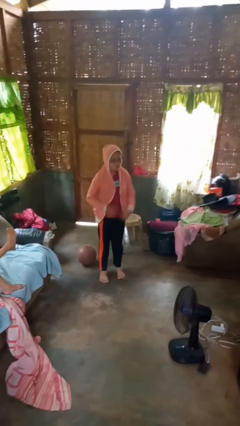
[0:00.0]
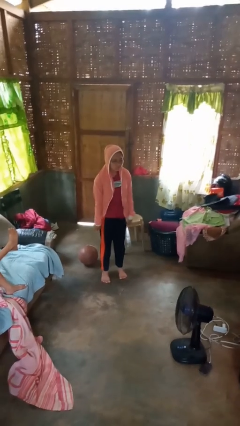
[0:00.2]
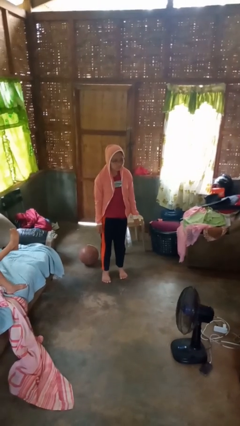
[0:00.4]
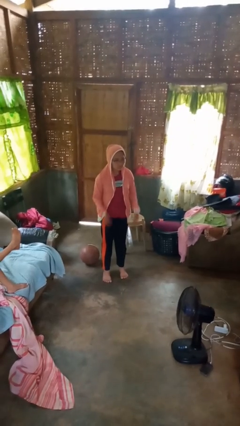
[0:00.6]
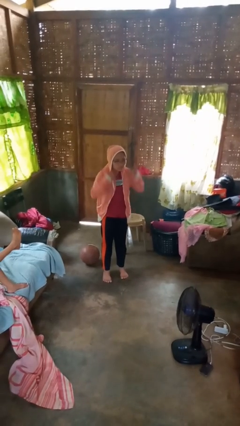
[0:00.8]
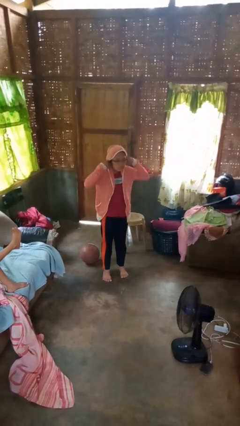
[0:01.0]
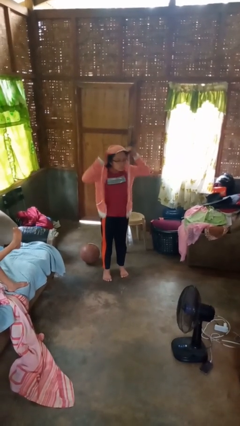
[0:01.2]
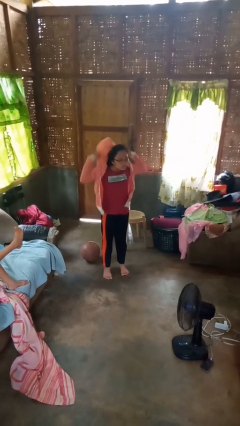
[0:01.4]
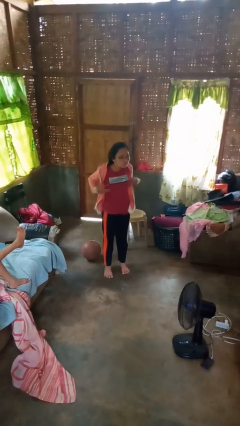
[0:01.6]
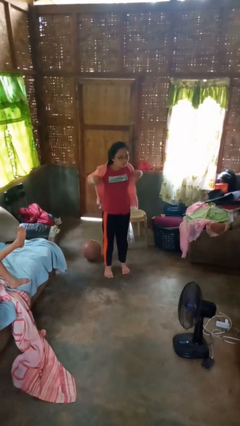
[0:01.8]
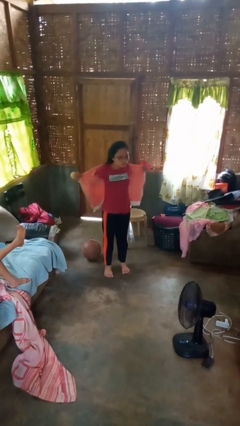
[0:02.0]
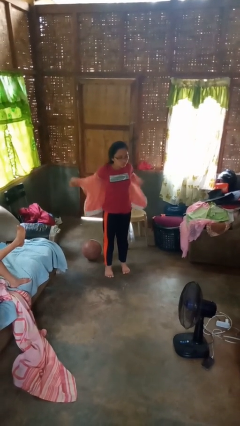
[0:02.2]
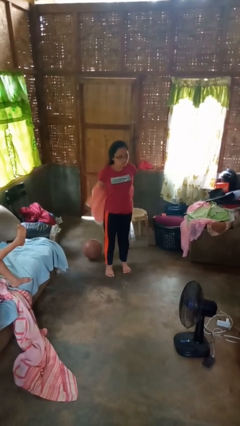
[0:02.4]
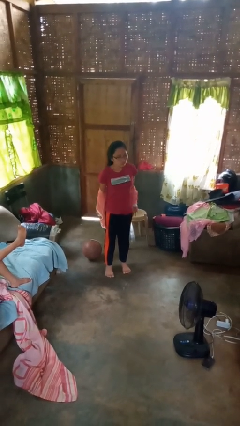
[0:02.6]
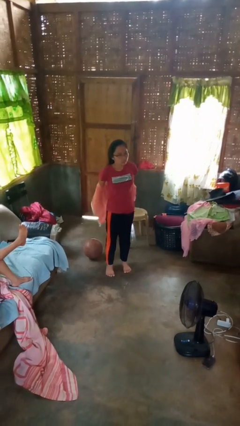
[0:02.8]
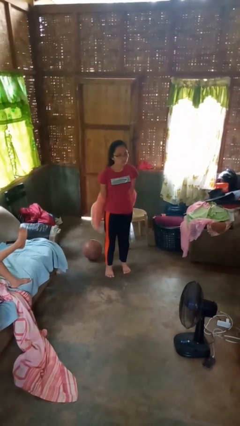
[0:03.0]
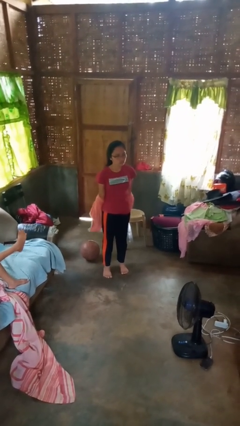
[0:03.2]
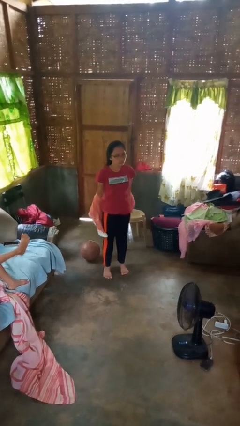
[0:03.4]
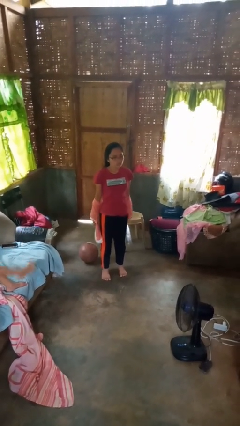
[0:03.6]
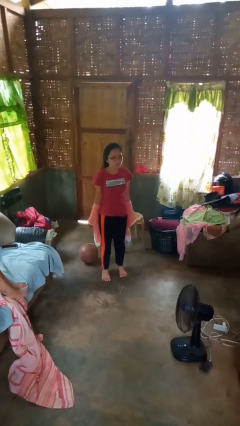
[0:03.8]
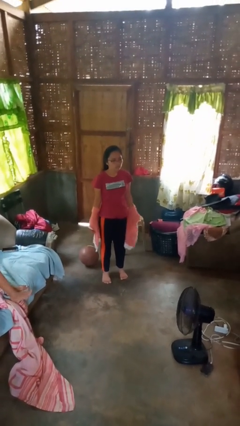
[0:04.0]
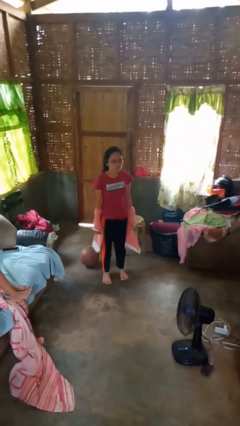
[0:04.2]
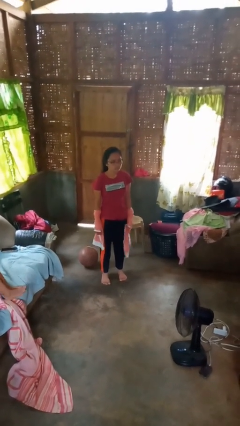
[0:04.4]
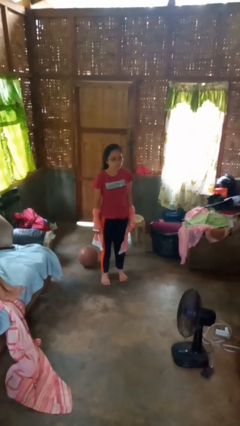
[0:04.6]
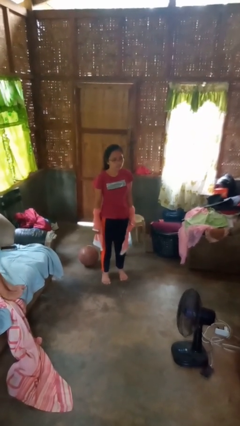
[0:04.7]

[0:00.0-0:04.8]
person takes off hoodie

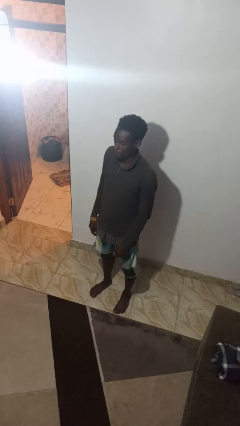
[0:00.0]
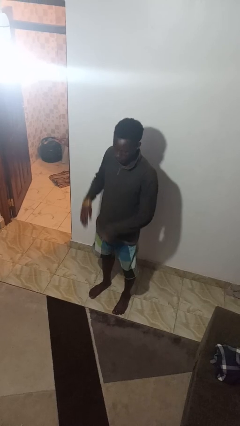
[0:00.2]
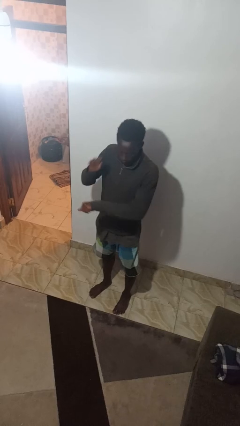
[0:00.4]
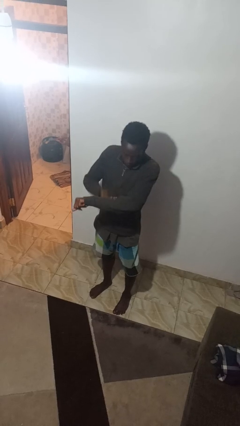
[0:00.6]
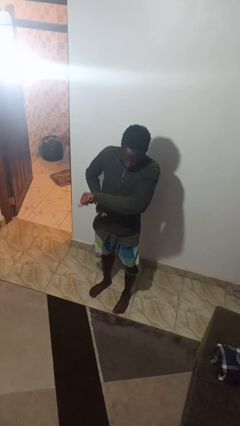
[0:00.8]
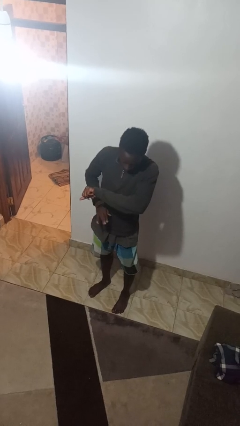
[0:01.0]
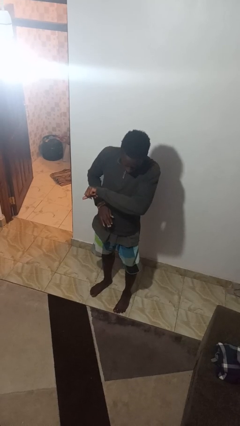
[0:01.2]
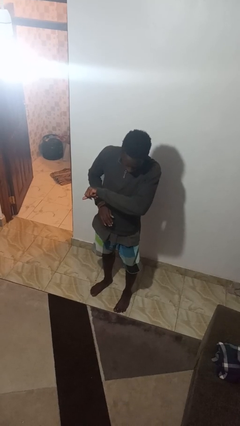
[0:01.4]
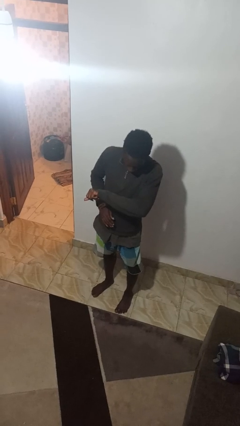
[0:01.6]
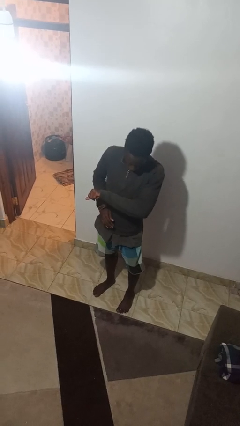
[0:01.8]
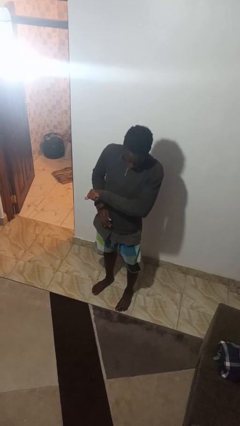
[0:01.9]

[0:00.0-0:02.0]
person swats bug

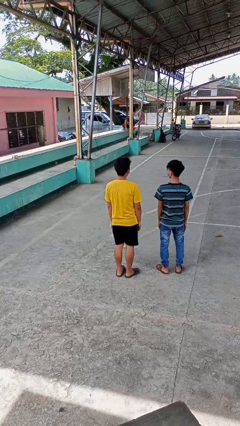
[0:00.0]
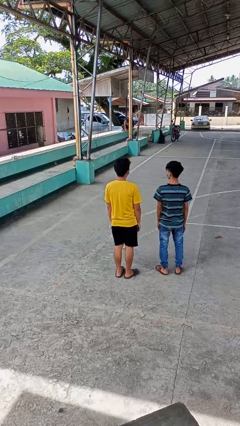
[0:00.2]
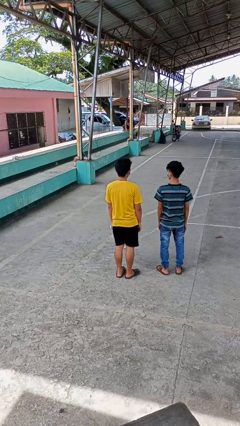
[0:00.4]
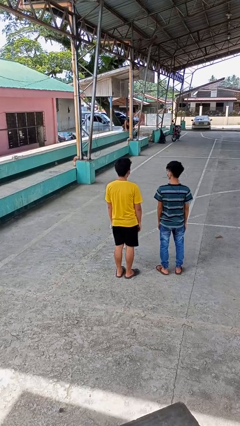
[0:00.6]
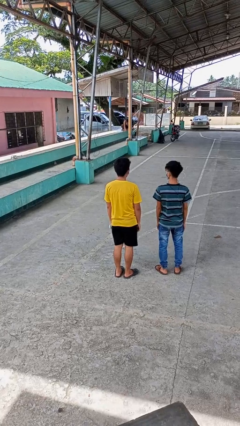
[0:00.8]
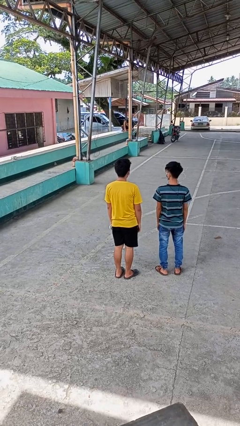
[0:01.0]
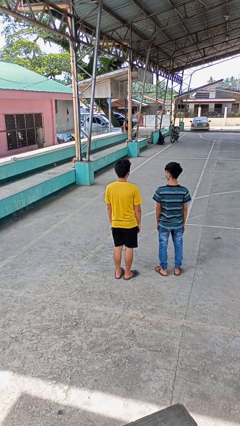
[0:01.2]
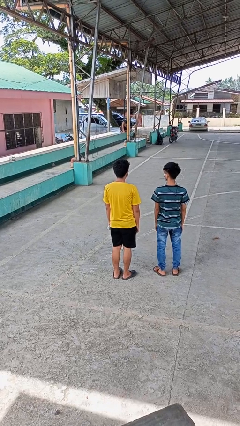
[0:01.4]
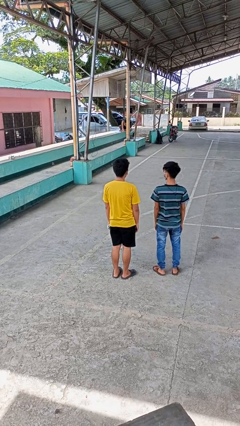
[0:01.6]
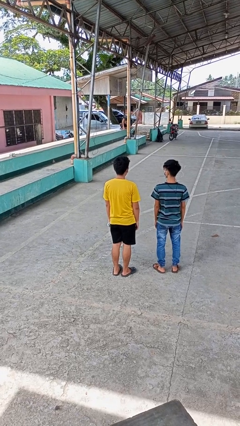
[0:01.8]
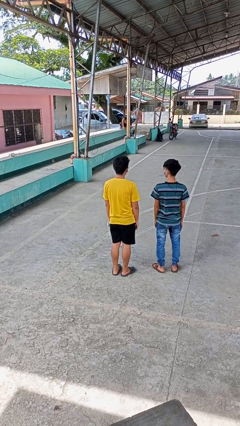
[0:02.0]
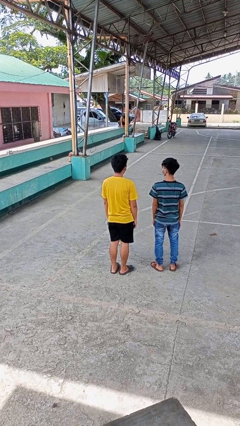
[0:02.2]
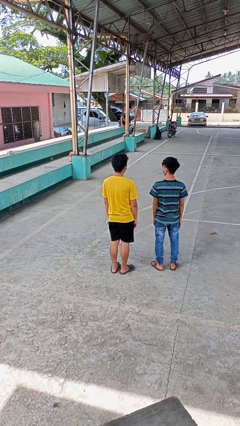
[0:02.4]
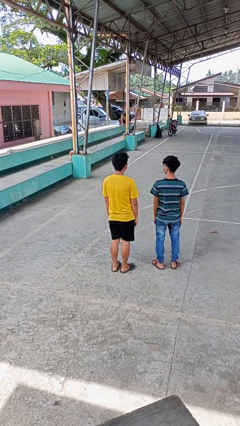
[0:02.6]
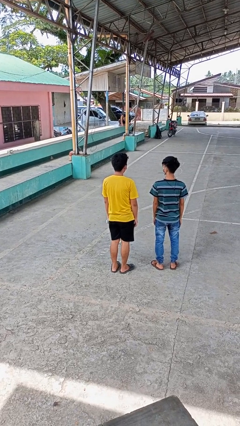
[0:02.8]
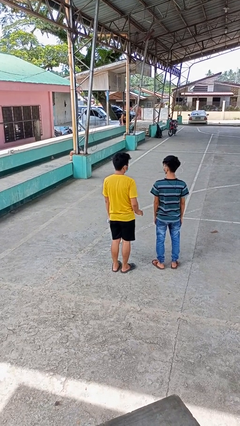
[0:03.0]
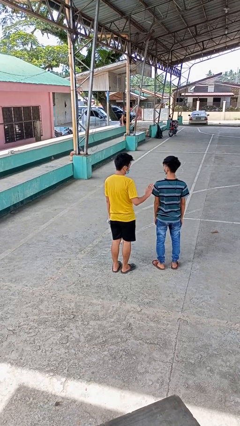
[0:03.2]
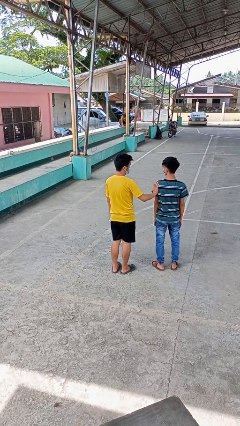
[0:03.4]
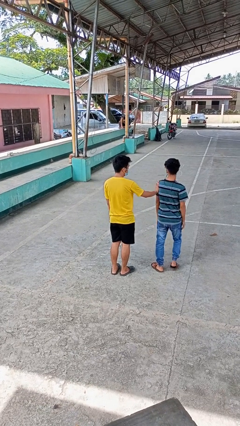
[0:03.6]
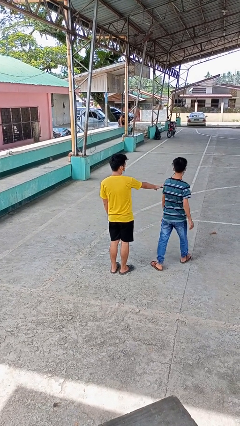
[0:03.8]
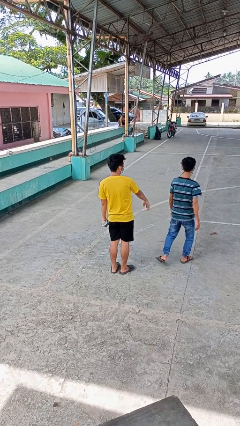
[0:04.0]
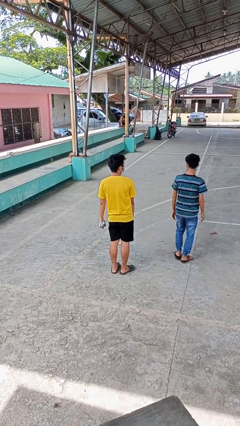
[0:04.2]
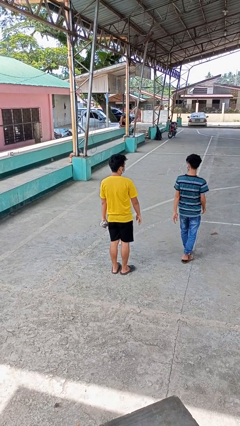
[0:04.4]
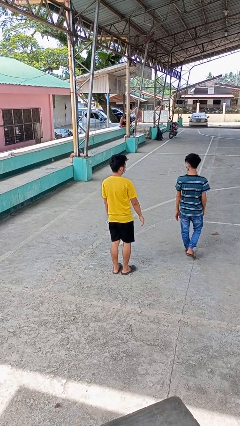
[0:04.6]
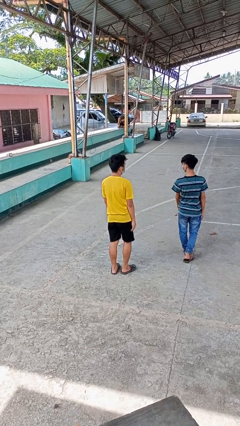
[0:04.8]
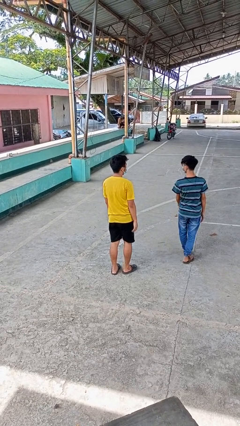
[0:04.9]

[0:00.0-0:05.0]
person shoves person

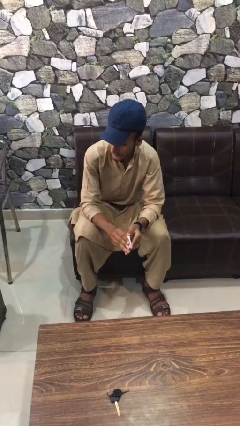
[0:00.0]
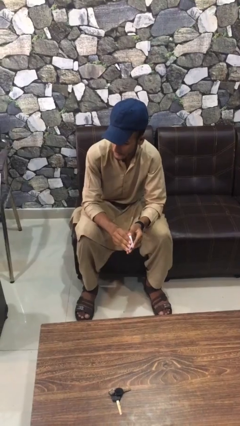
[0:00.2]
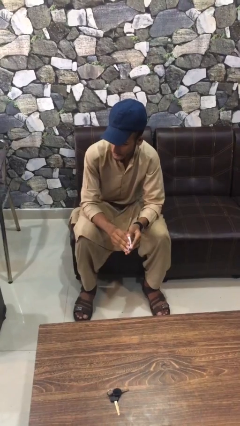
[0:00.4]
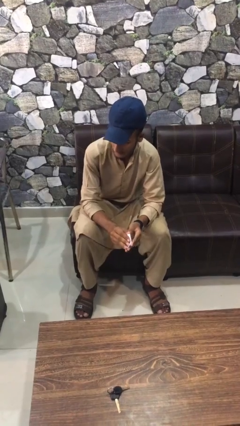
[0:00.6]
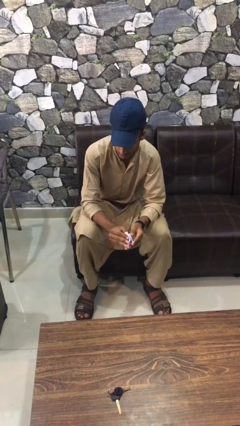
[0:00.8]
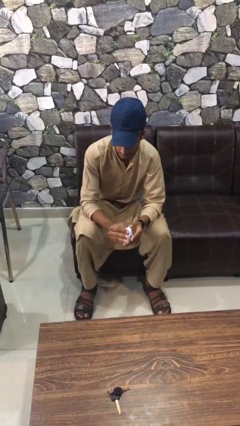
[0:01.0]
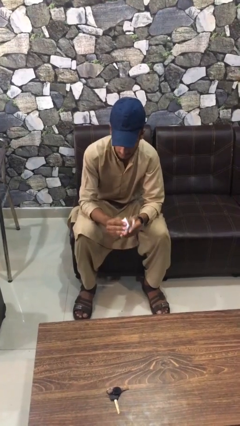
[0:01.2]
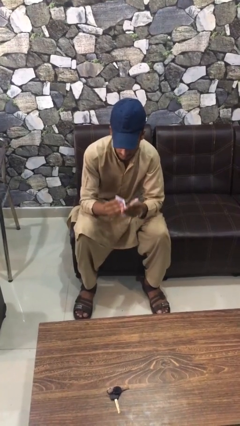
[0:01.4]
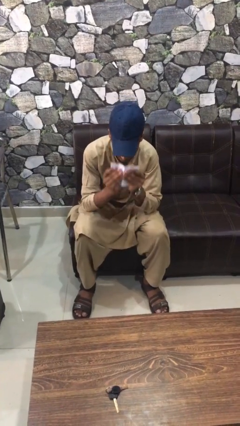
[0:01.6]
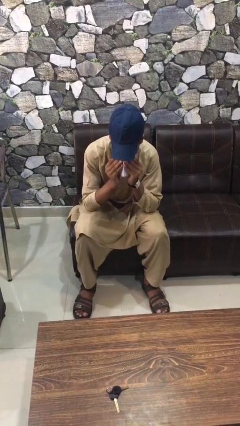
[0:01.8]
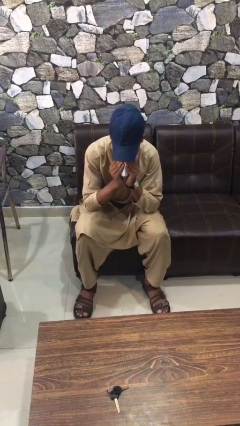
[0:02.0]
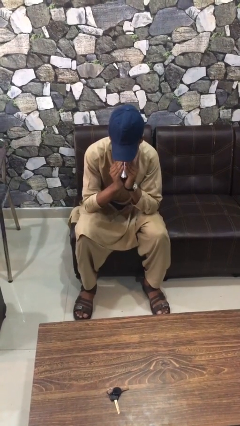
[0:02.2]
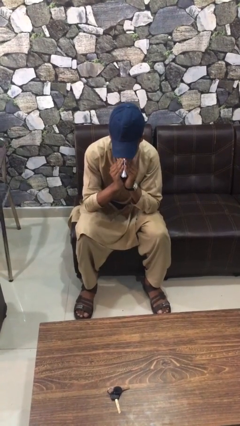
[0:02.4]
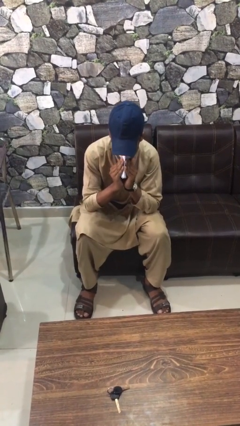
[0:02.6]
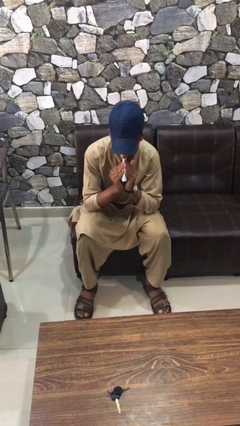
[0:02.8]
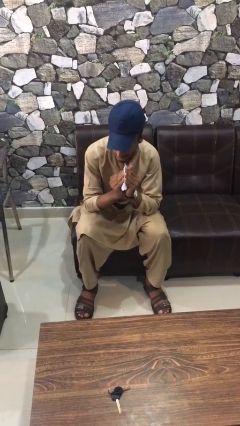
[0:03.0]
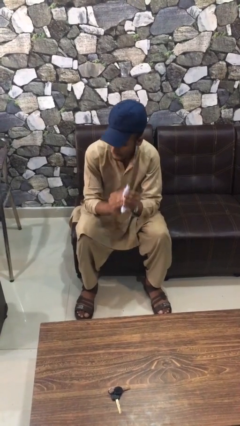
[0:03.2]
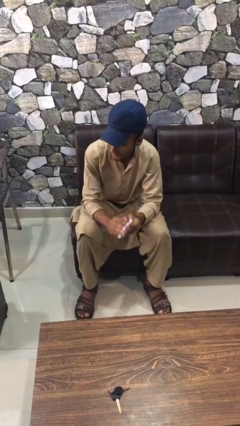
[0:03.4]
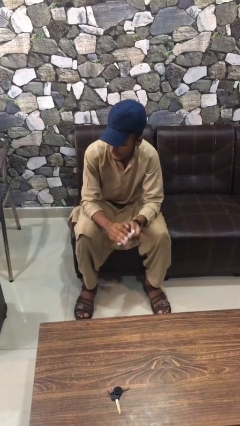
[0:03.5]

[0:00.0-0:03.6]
person blows nose

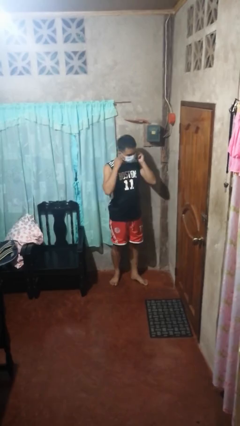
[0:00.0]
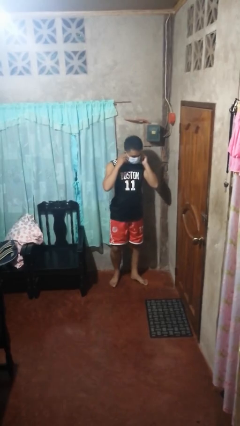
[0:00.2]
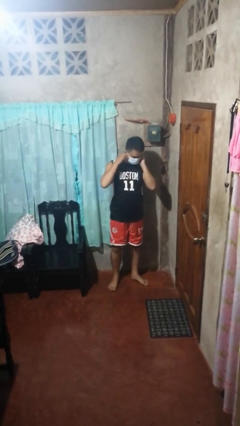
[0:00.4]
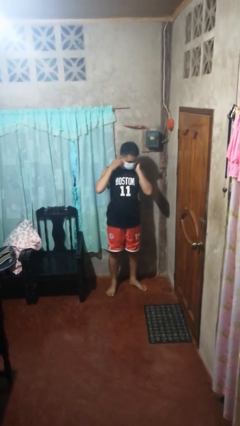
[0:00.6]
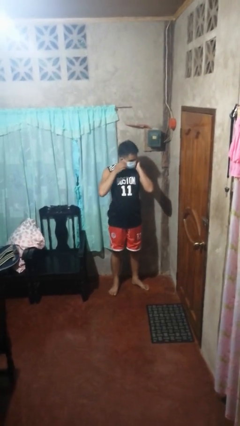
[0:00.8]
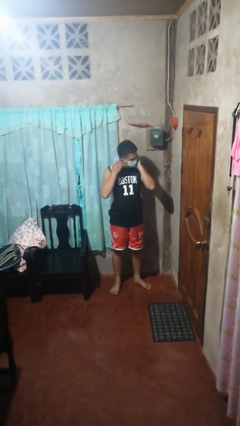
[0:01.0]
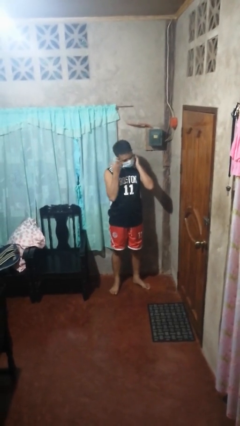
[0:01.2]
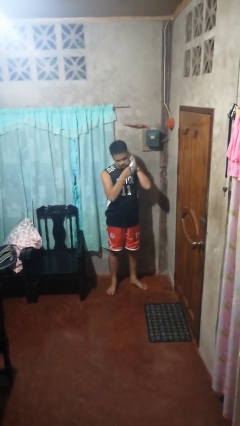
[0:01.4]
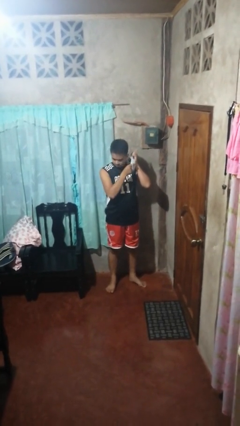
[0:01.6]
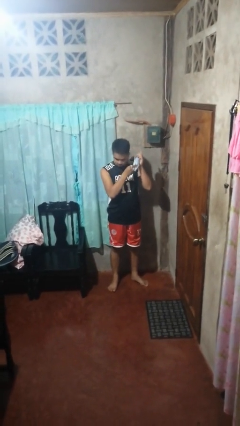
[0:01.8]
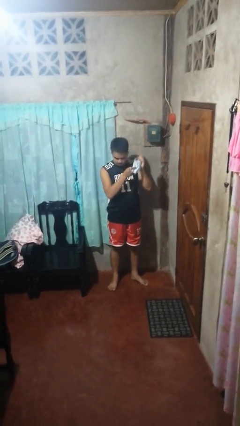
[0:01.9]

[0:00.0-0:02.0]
person takes off facemask

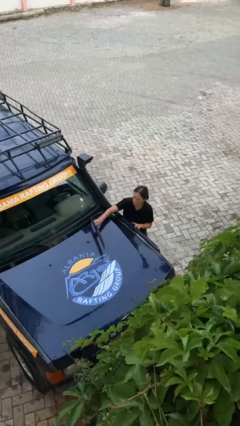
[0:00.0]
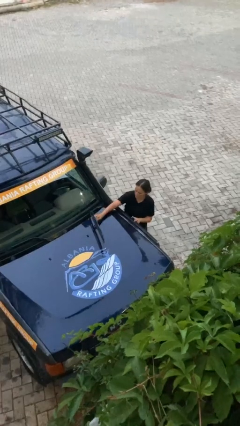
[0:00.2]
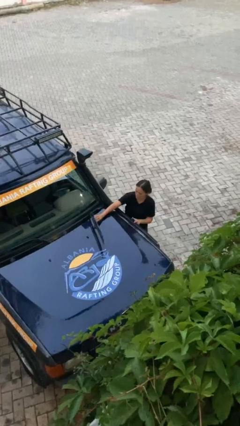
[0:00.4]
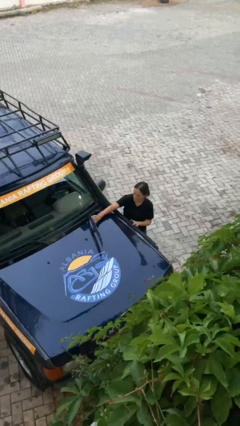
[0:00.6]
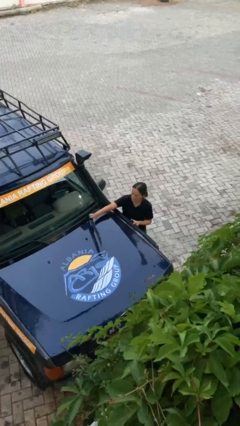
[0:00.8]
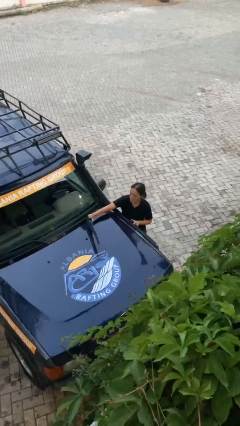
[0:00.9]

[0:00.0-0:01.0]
person flips up car wipers
